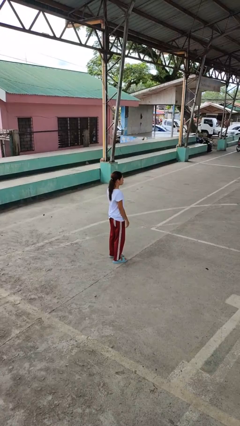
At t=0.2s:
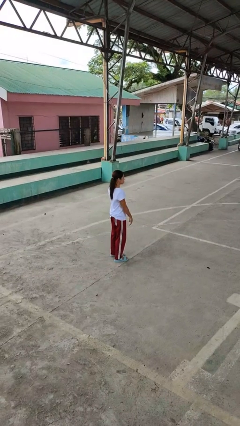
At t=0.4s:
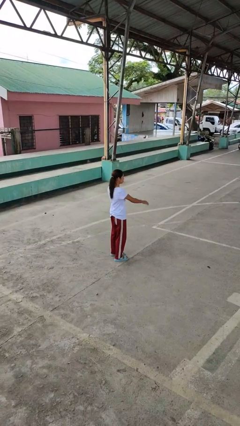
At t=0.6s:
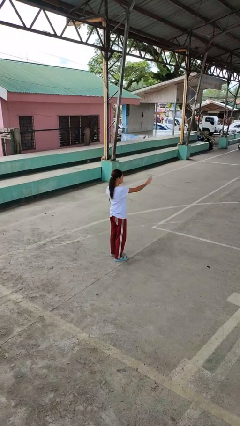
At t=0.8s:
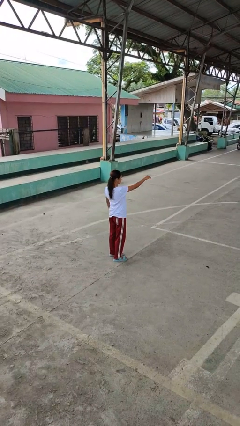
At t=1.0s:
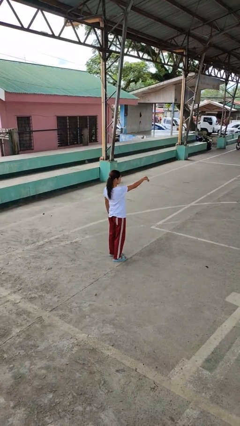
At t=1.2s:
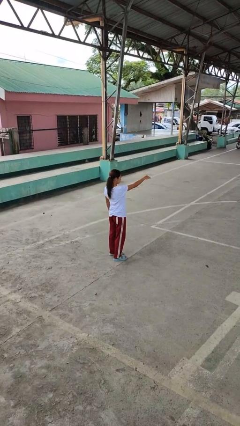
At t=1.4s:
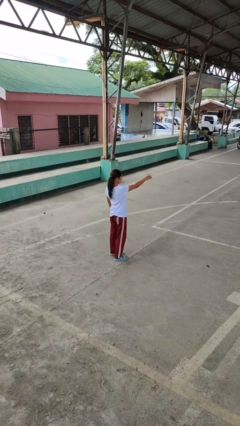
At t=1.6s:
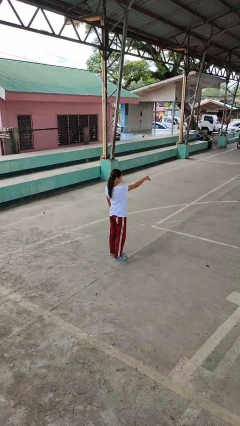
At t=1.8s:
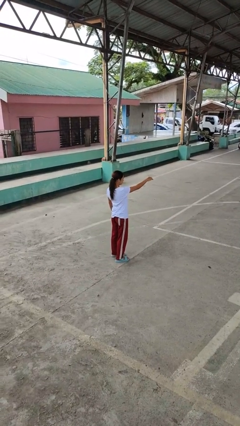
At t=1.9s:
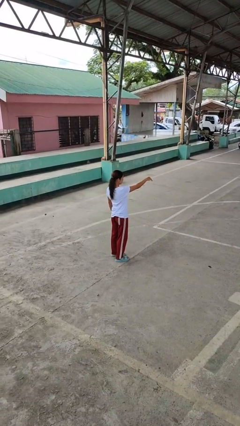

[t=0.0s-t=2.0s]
person gestures come here

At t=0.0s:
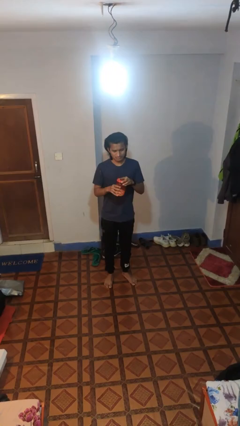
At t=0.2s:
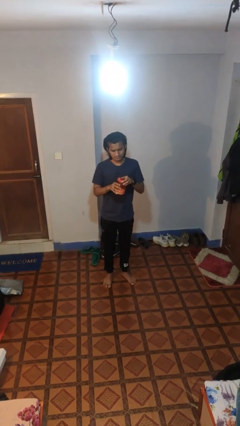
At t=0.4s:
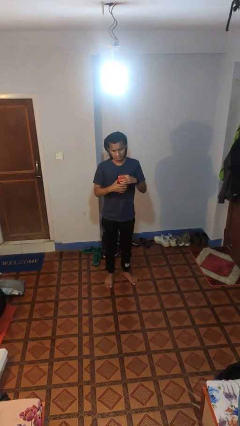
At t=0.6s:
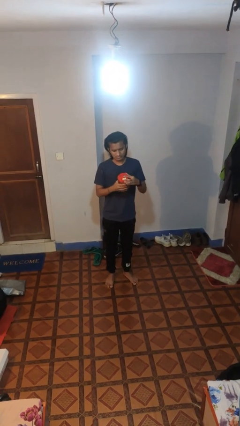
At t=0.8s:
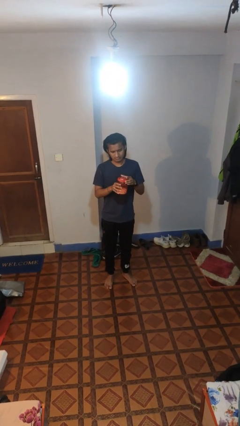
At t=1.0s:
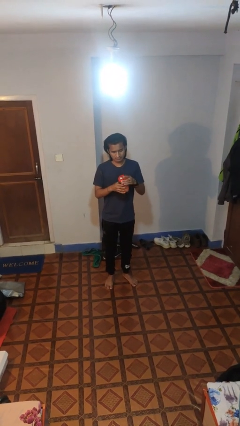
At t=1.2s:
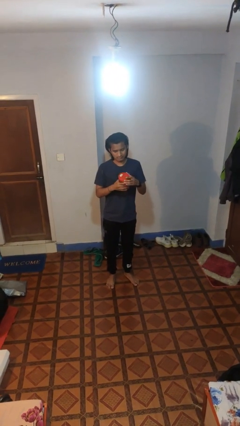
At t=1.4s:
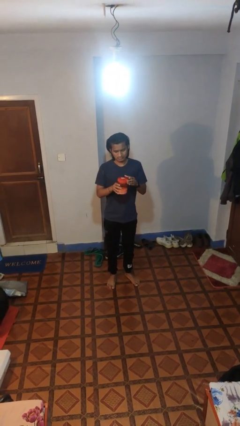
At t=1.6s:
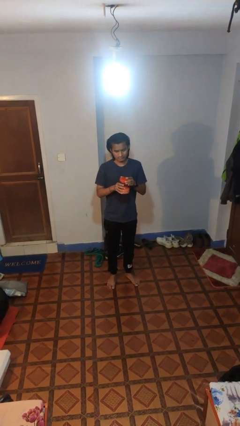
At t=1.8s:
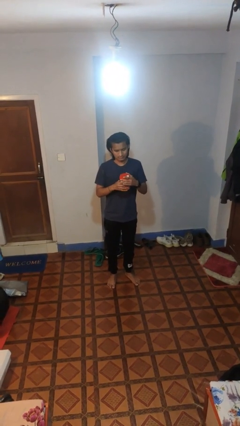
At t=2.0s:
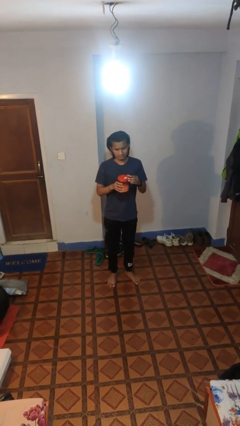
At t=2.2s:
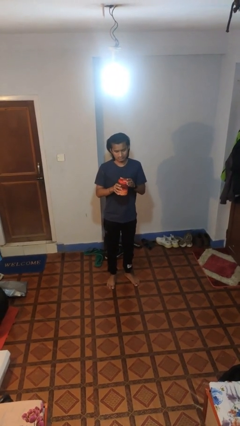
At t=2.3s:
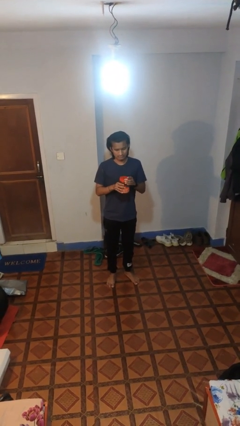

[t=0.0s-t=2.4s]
person closes jar

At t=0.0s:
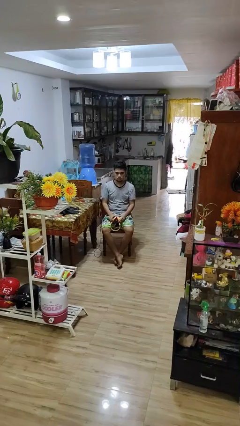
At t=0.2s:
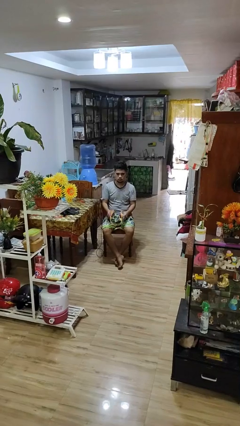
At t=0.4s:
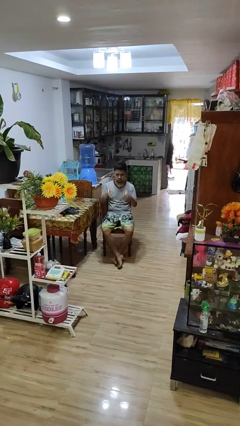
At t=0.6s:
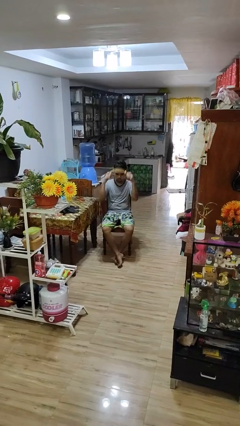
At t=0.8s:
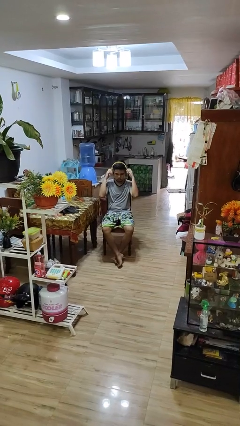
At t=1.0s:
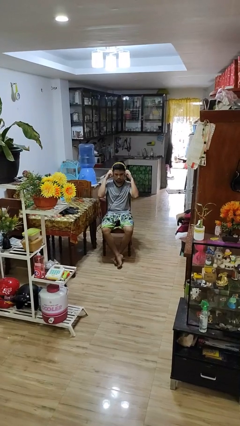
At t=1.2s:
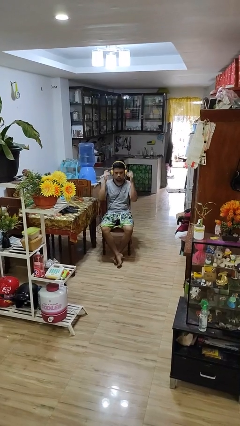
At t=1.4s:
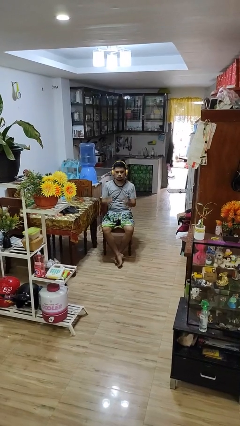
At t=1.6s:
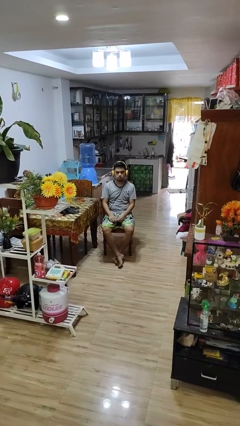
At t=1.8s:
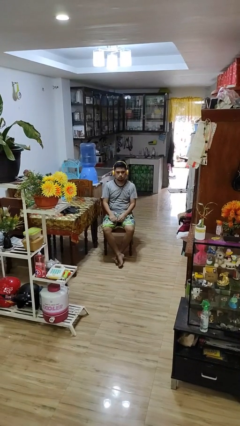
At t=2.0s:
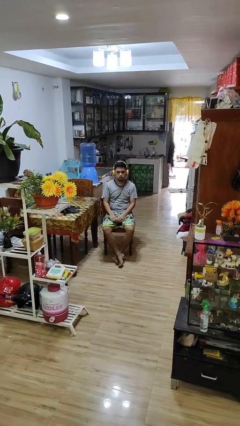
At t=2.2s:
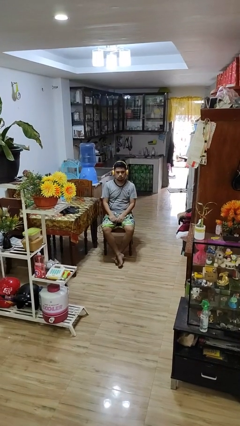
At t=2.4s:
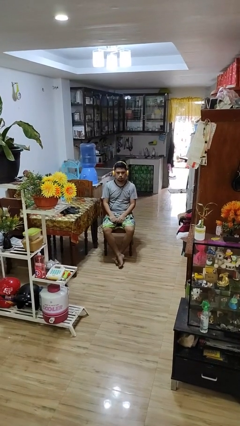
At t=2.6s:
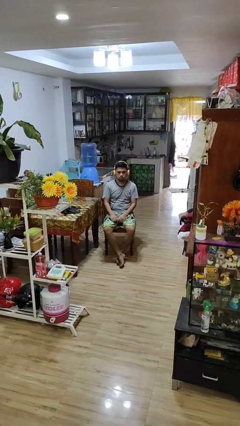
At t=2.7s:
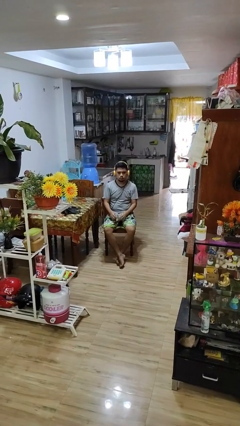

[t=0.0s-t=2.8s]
person puts on headphones

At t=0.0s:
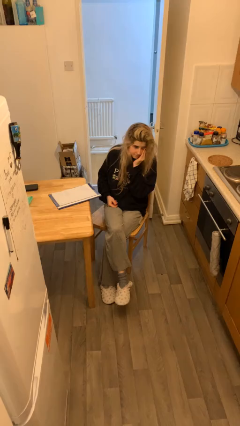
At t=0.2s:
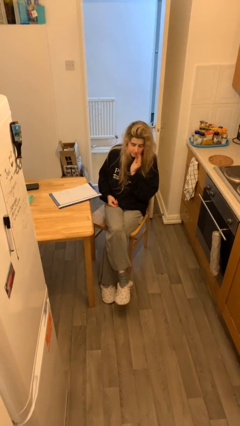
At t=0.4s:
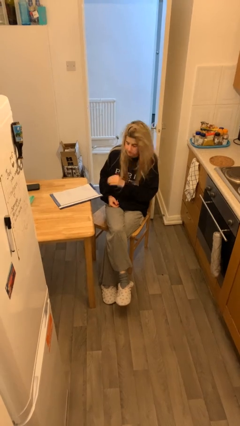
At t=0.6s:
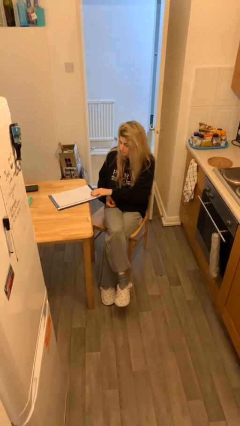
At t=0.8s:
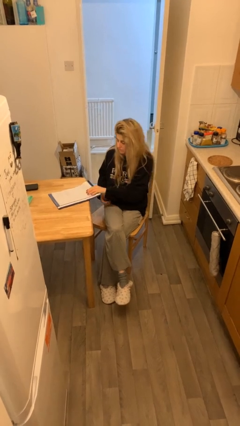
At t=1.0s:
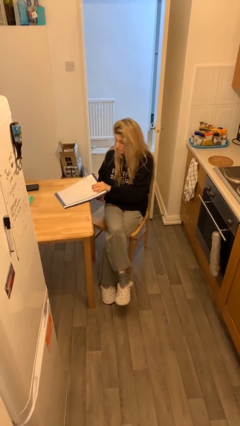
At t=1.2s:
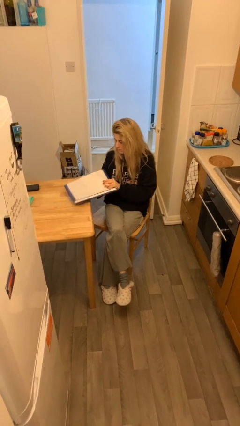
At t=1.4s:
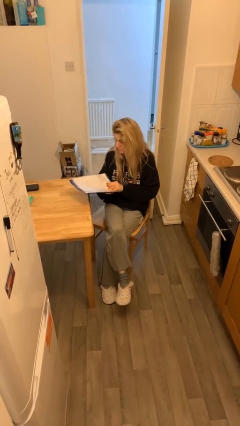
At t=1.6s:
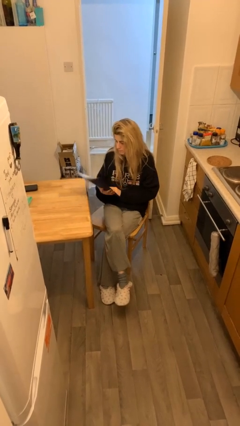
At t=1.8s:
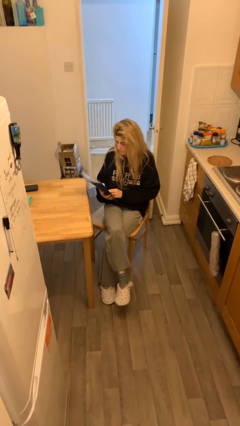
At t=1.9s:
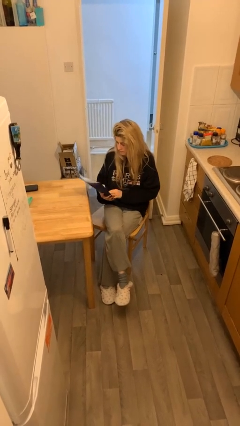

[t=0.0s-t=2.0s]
person picks up object from table

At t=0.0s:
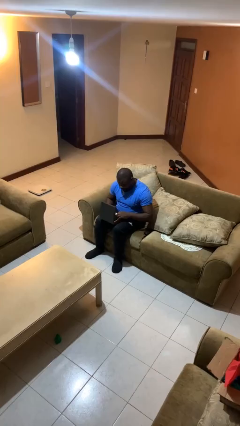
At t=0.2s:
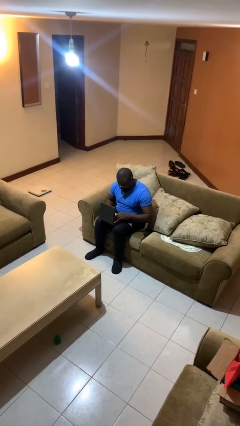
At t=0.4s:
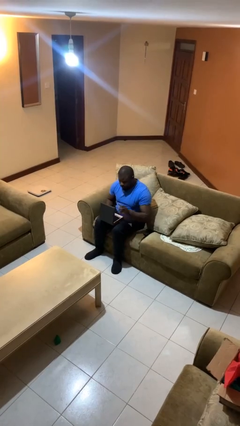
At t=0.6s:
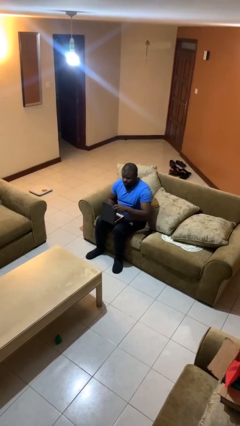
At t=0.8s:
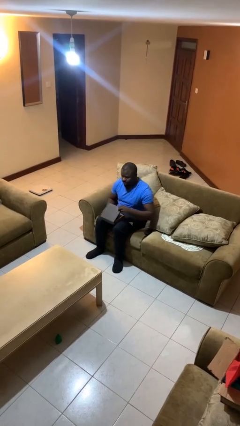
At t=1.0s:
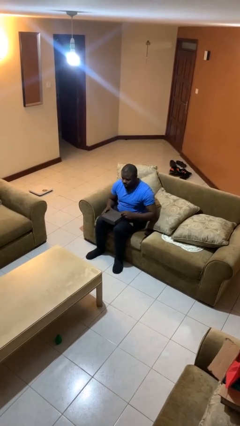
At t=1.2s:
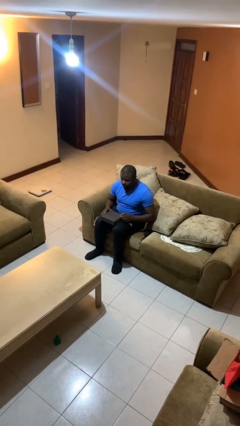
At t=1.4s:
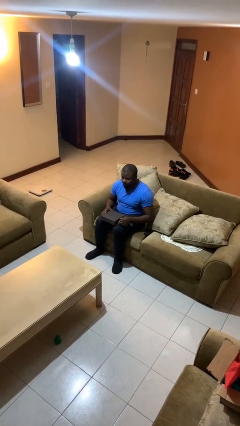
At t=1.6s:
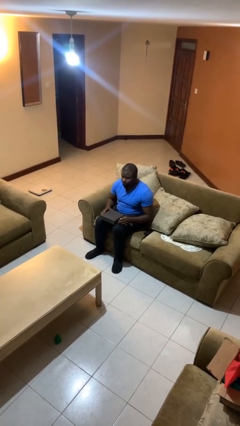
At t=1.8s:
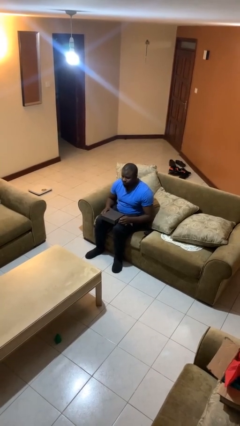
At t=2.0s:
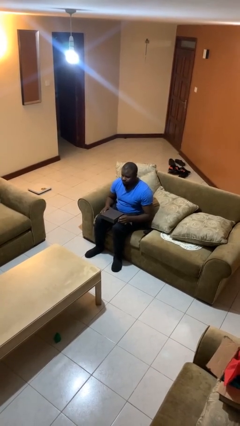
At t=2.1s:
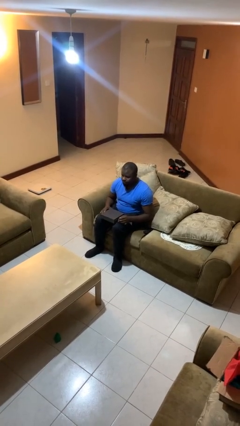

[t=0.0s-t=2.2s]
person closes jewelry box

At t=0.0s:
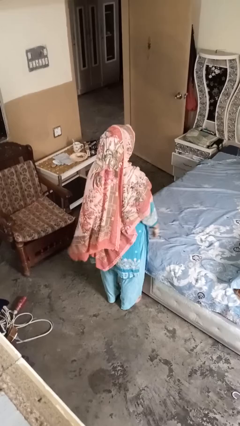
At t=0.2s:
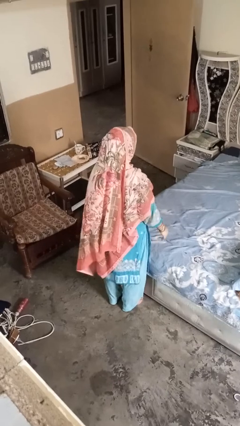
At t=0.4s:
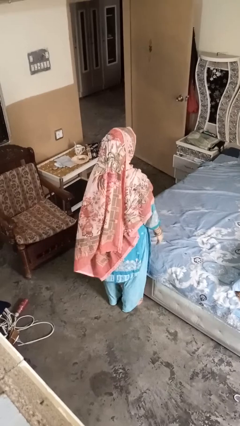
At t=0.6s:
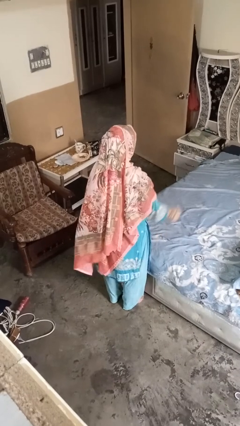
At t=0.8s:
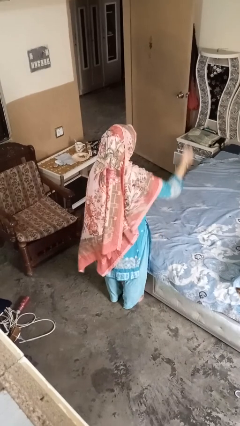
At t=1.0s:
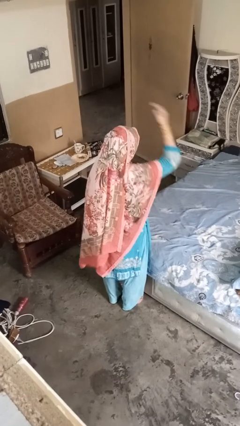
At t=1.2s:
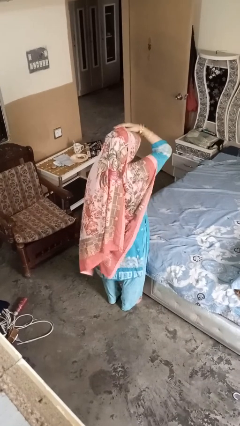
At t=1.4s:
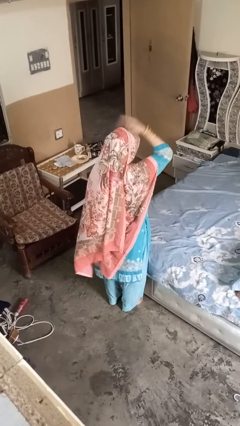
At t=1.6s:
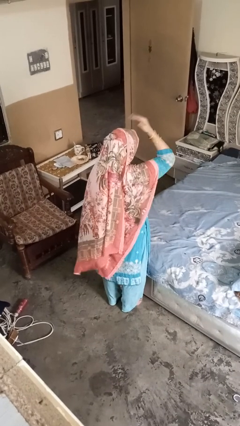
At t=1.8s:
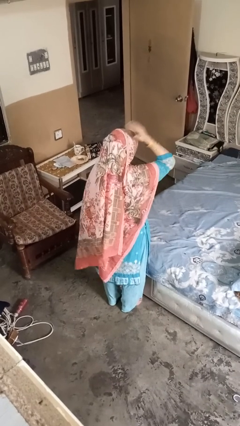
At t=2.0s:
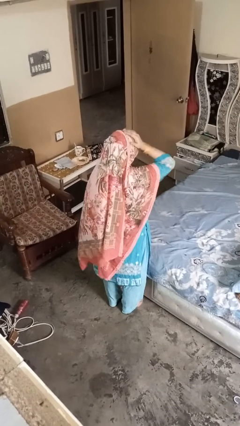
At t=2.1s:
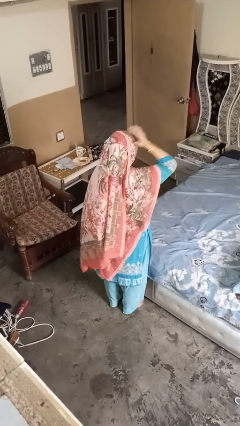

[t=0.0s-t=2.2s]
person pats head

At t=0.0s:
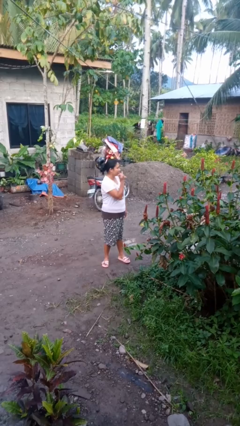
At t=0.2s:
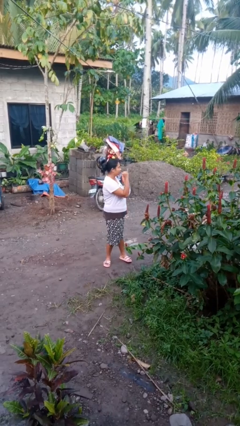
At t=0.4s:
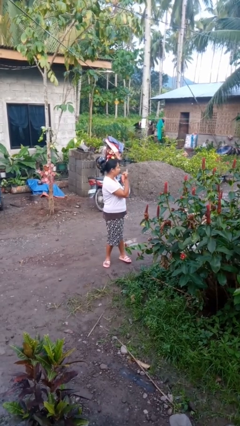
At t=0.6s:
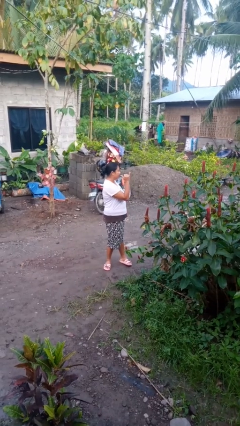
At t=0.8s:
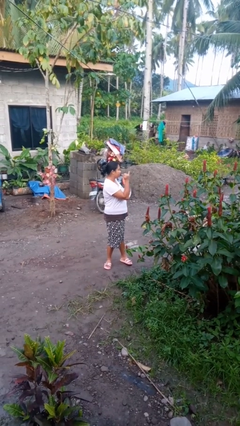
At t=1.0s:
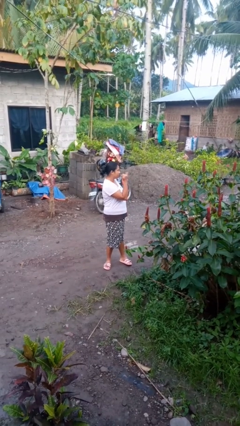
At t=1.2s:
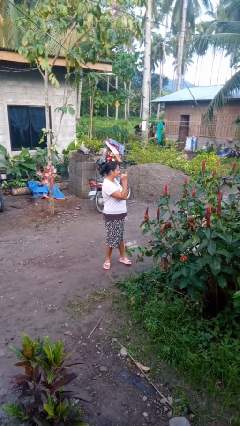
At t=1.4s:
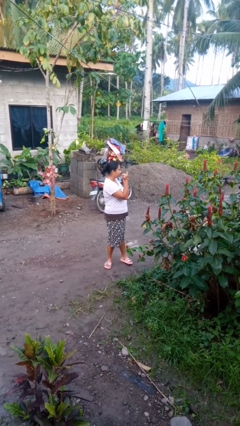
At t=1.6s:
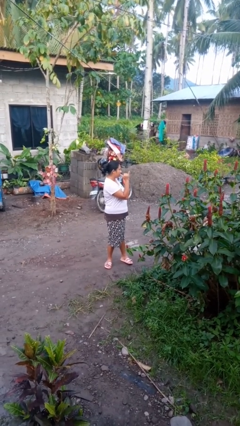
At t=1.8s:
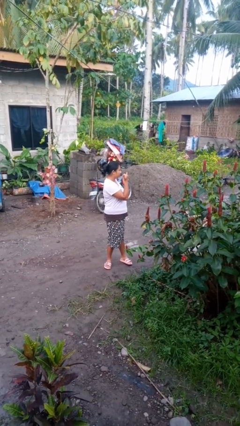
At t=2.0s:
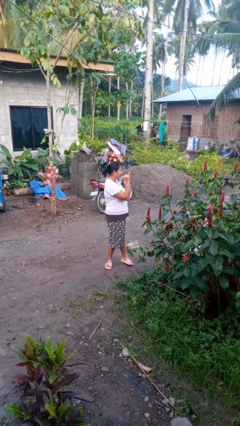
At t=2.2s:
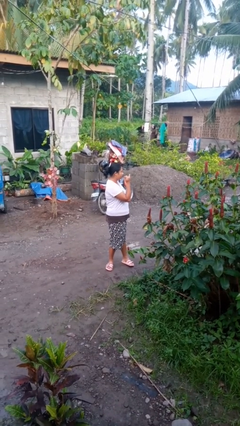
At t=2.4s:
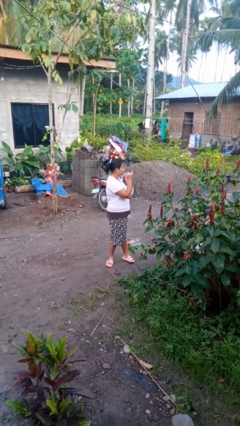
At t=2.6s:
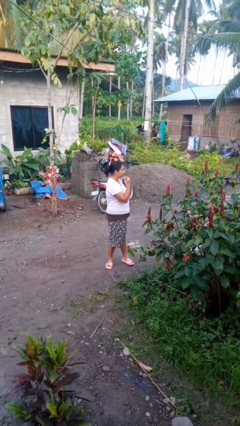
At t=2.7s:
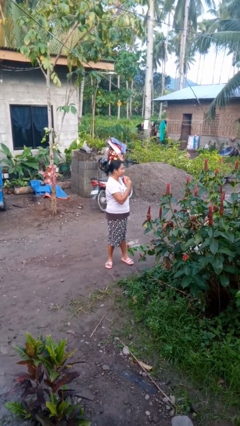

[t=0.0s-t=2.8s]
person gestures hang loose

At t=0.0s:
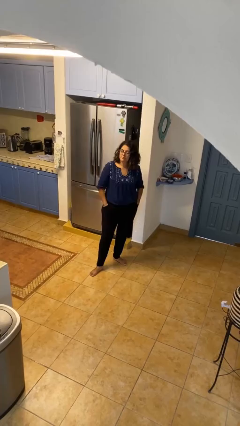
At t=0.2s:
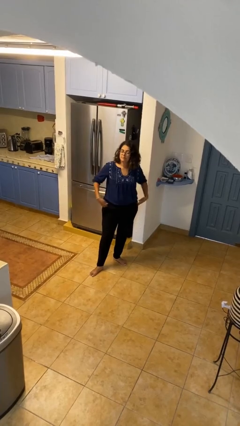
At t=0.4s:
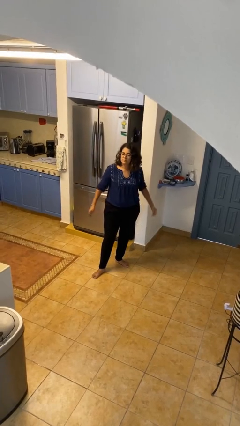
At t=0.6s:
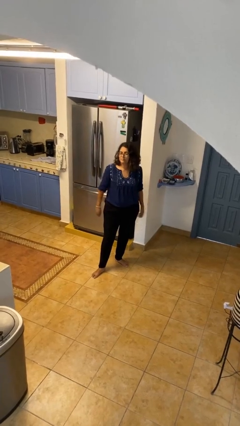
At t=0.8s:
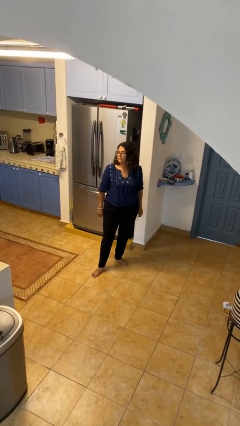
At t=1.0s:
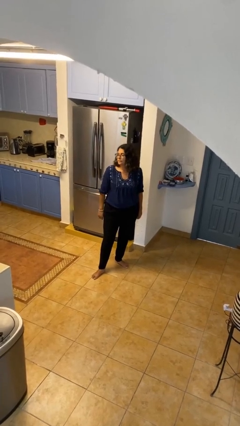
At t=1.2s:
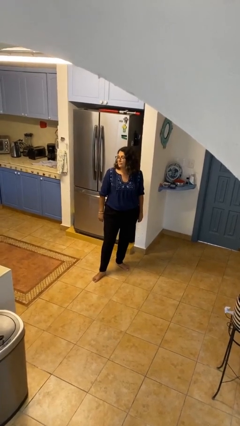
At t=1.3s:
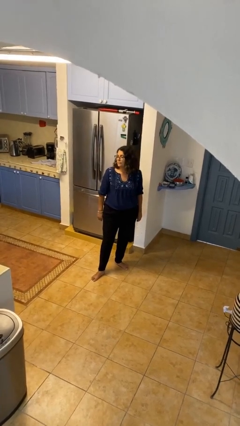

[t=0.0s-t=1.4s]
person puts hands in back pockets
